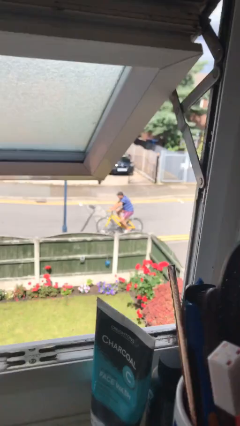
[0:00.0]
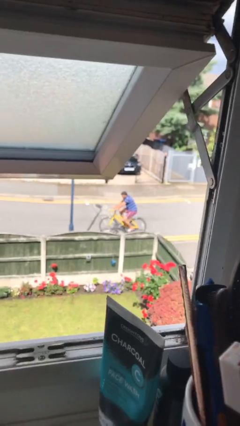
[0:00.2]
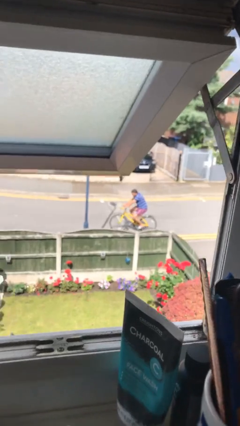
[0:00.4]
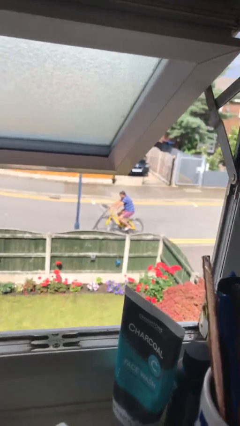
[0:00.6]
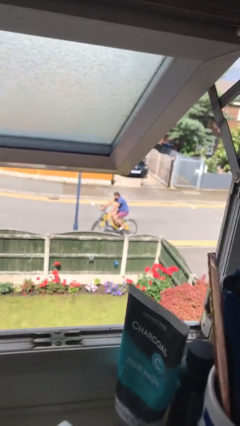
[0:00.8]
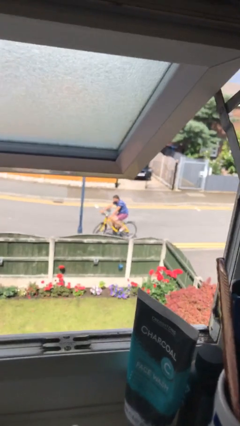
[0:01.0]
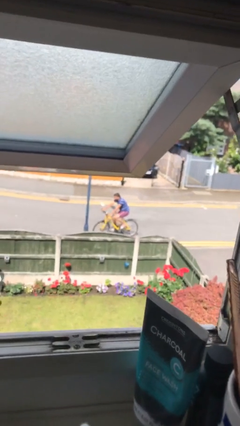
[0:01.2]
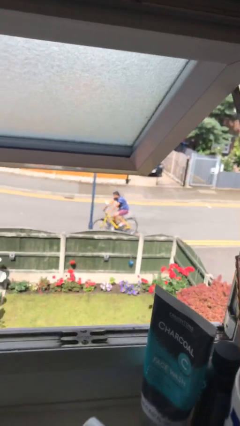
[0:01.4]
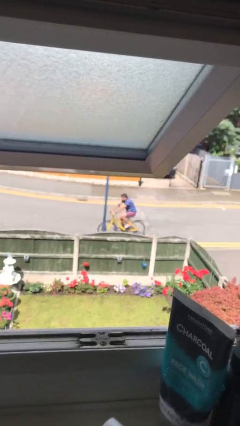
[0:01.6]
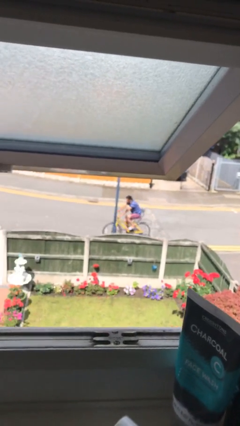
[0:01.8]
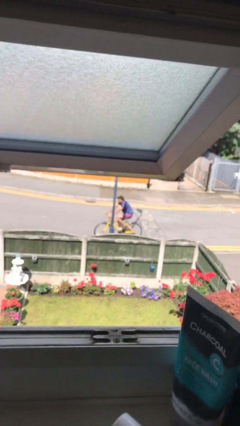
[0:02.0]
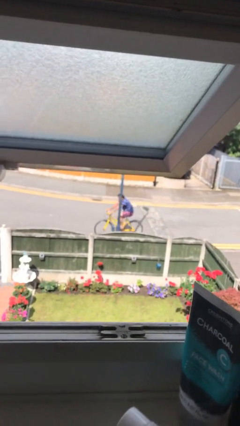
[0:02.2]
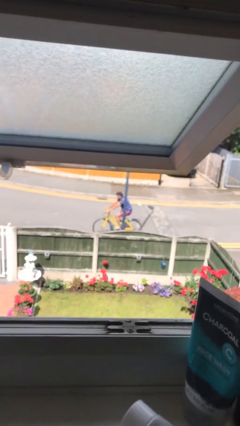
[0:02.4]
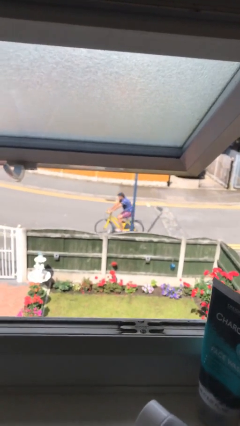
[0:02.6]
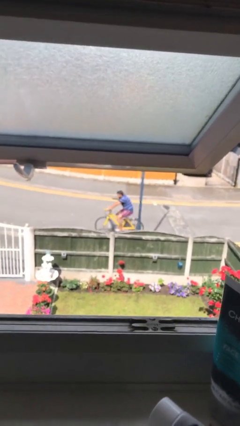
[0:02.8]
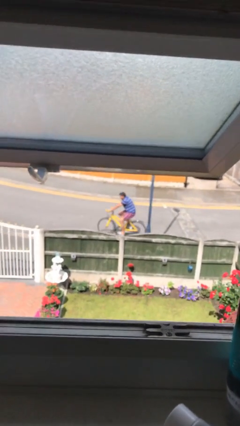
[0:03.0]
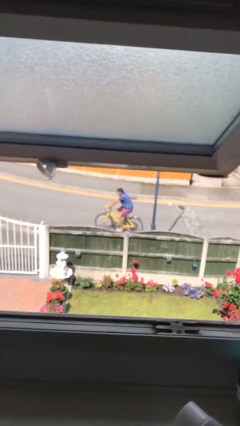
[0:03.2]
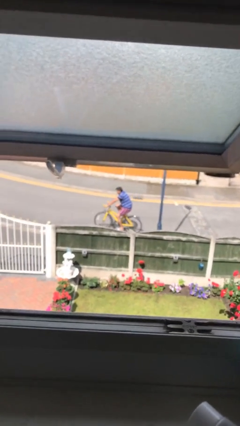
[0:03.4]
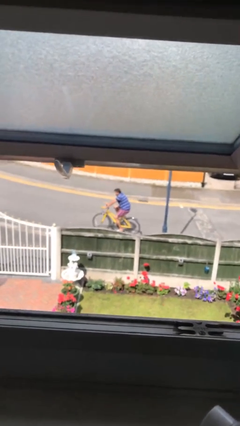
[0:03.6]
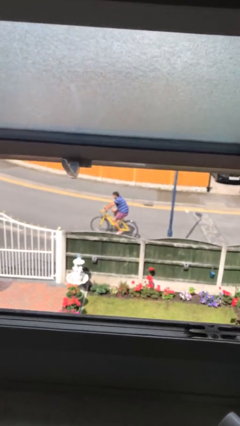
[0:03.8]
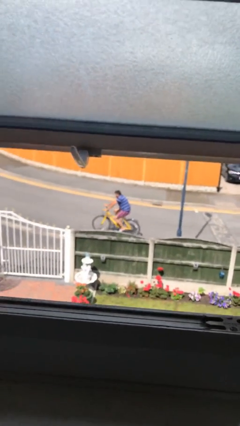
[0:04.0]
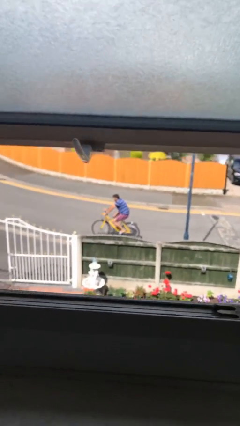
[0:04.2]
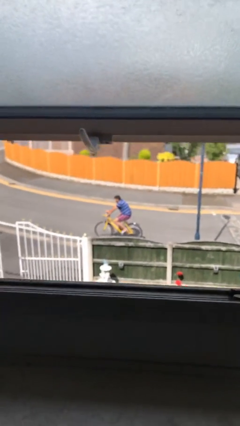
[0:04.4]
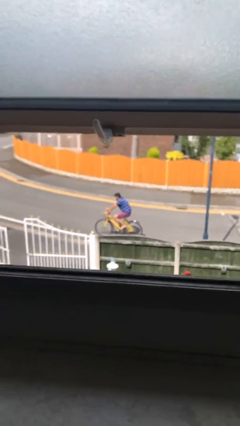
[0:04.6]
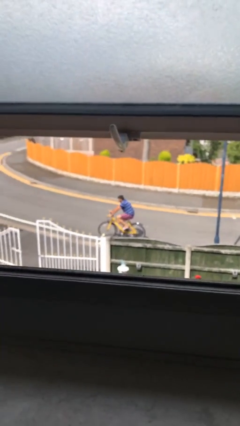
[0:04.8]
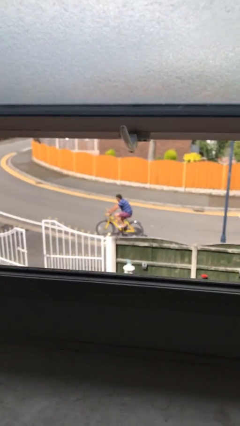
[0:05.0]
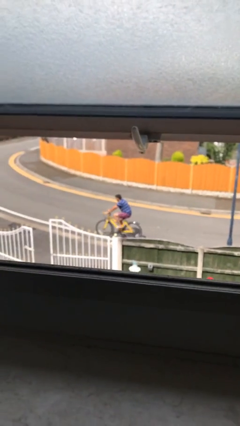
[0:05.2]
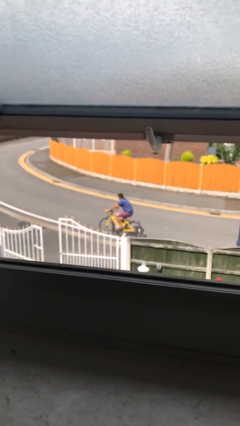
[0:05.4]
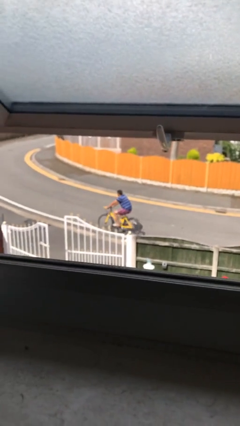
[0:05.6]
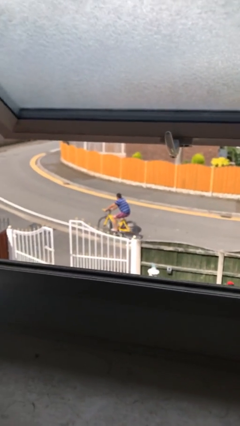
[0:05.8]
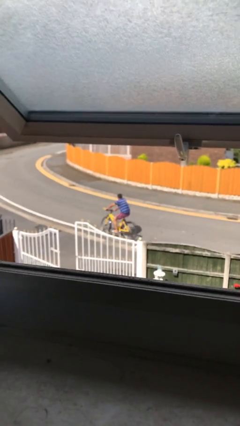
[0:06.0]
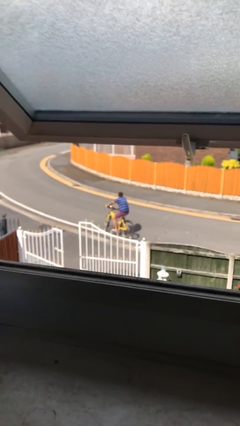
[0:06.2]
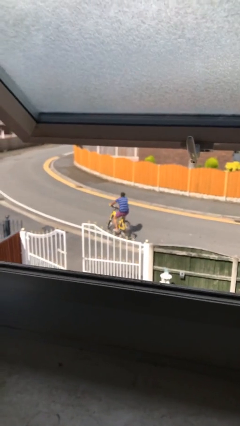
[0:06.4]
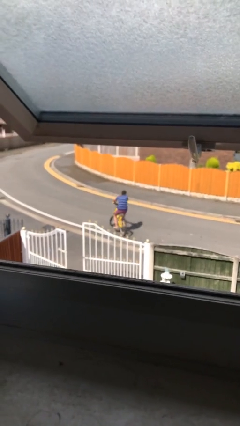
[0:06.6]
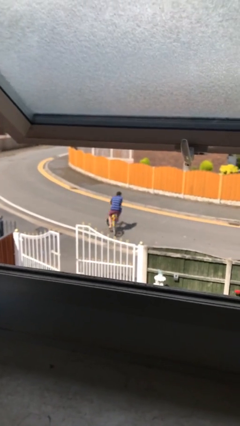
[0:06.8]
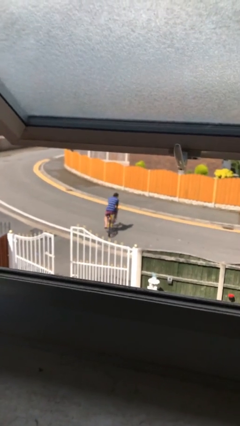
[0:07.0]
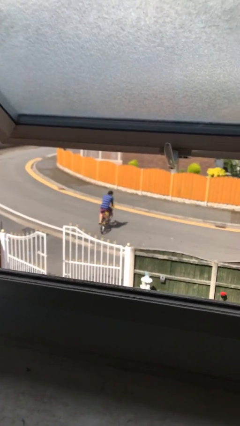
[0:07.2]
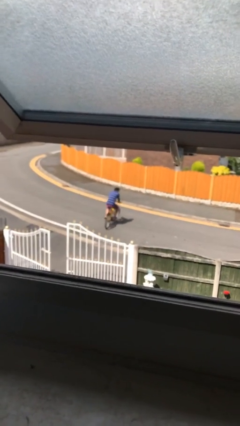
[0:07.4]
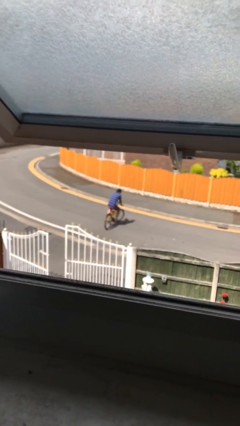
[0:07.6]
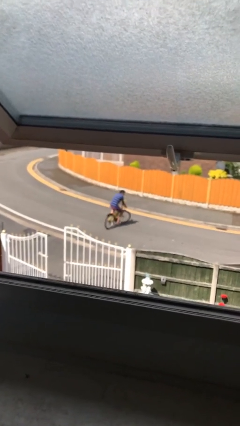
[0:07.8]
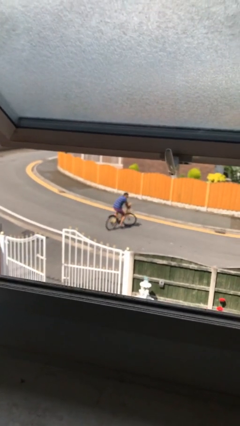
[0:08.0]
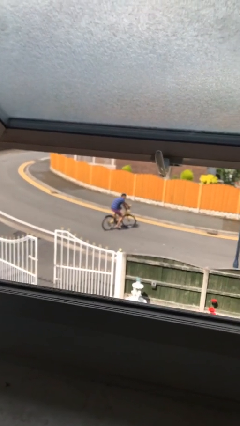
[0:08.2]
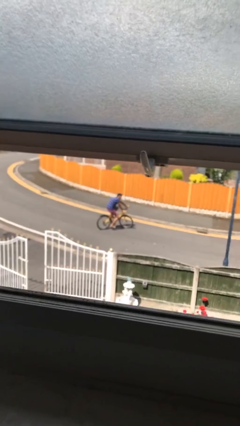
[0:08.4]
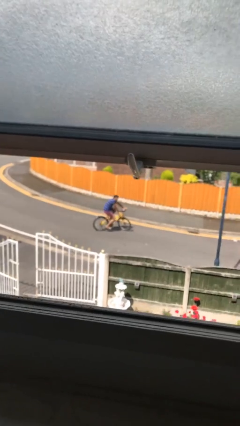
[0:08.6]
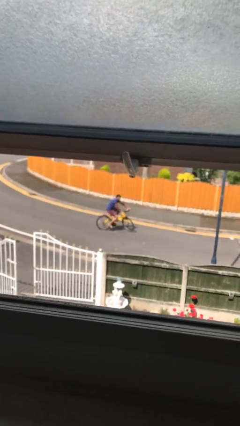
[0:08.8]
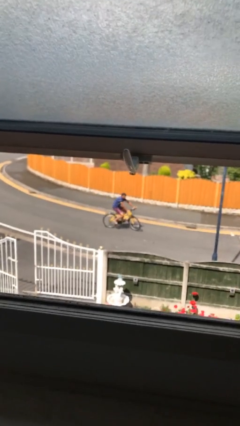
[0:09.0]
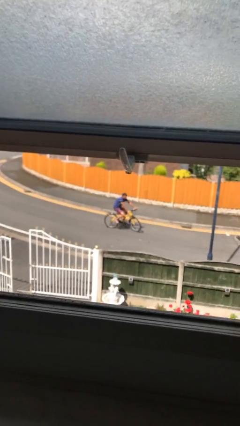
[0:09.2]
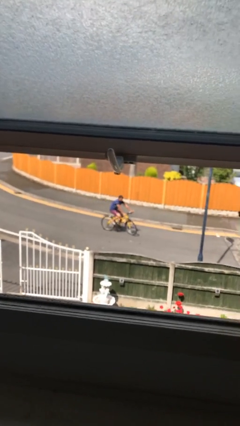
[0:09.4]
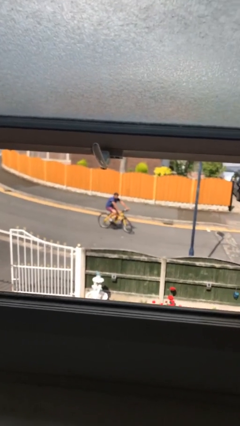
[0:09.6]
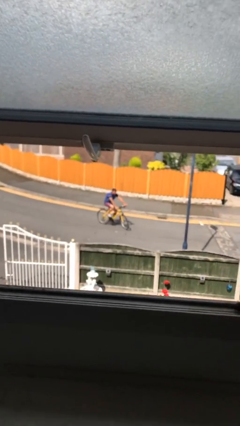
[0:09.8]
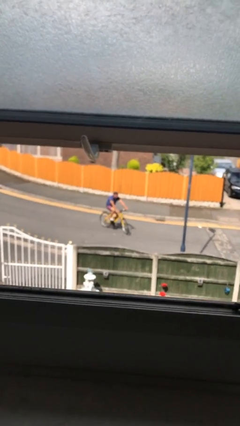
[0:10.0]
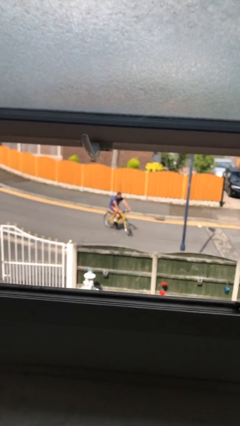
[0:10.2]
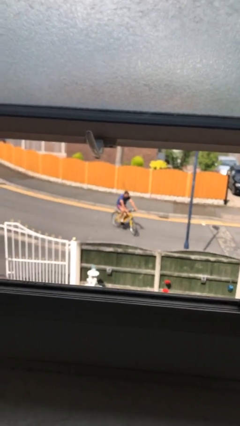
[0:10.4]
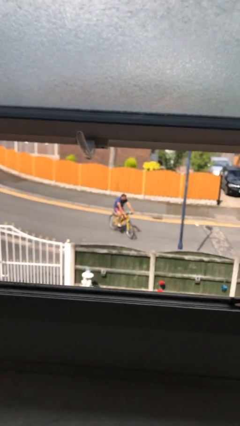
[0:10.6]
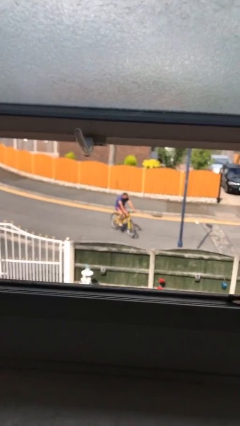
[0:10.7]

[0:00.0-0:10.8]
person rides bicycle

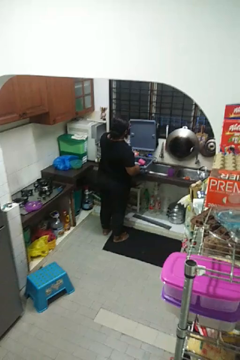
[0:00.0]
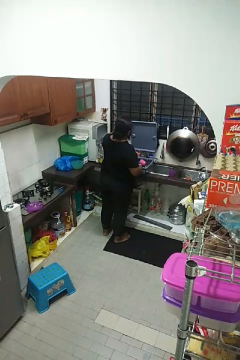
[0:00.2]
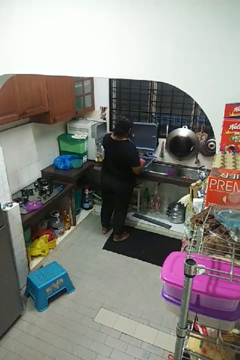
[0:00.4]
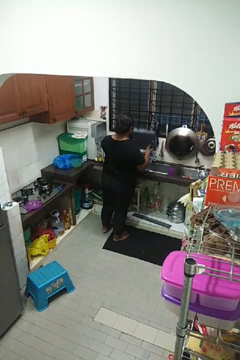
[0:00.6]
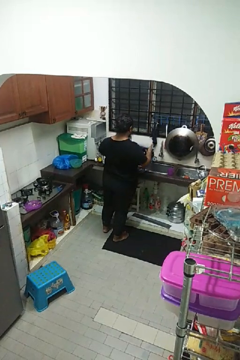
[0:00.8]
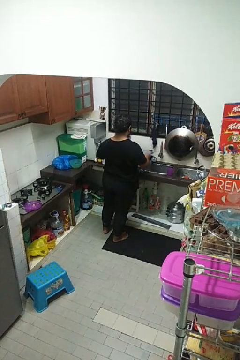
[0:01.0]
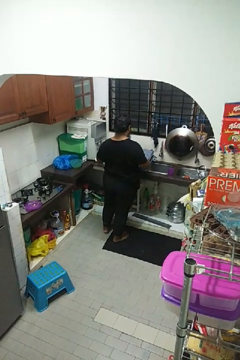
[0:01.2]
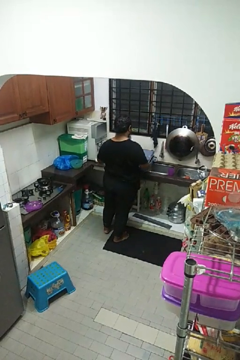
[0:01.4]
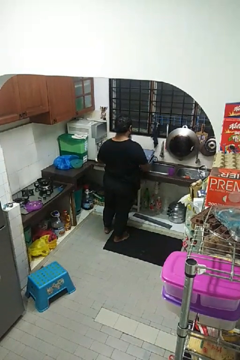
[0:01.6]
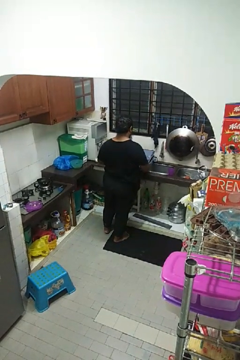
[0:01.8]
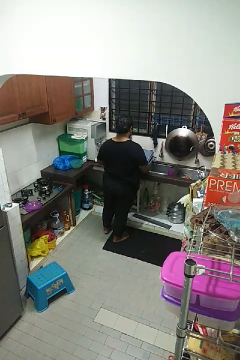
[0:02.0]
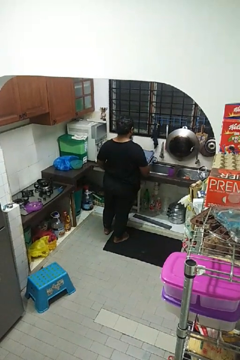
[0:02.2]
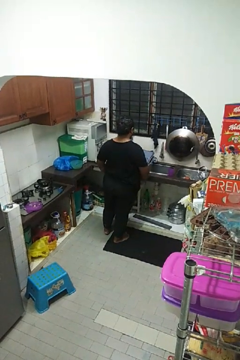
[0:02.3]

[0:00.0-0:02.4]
person closes dishwasher

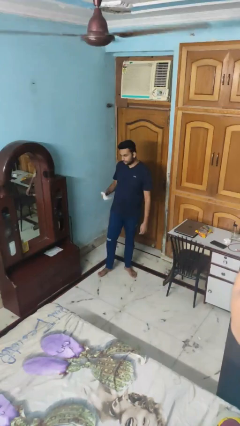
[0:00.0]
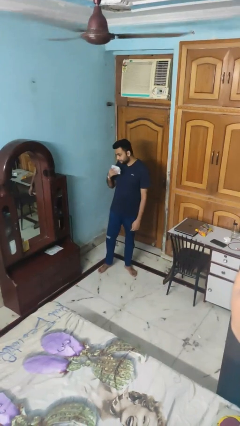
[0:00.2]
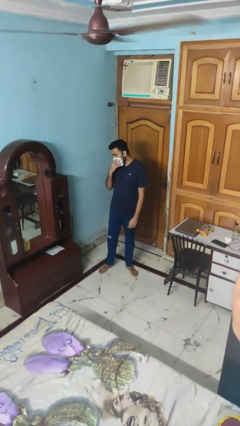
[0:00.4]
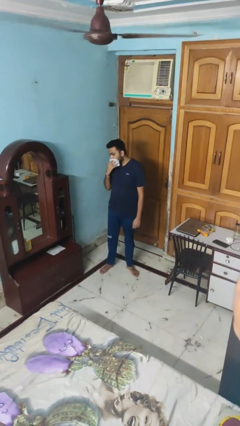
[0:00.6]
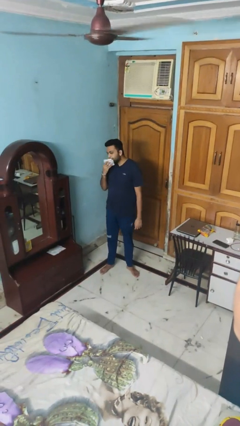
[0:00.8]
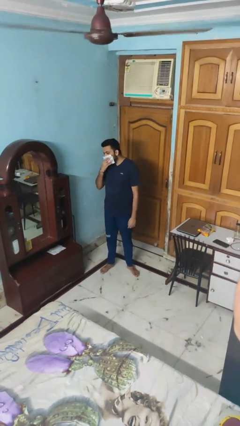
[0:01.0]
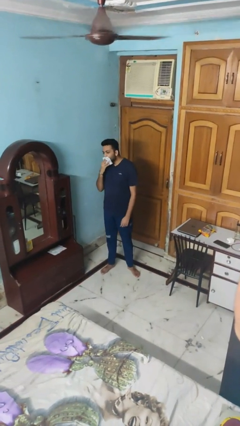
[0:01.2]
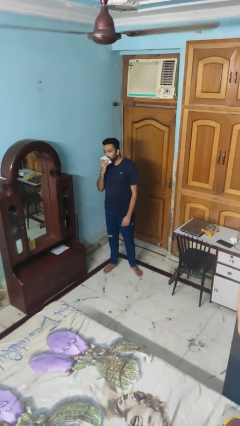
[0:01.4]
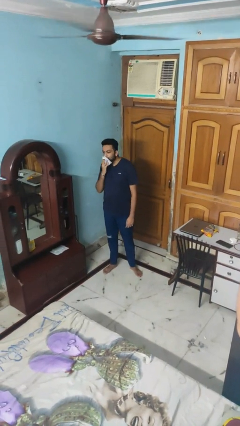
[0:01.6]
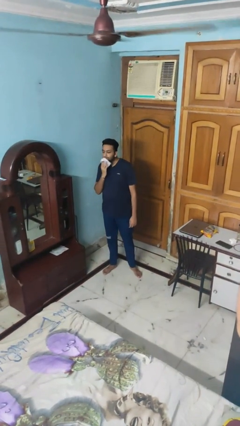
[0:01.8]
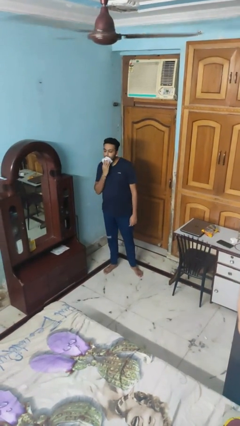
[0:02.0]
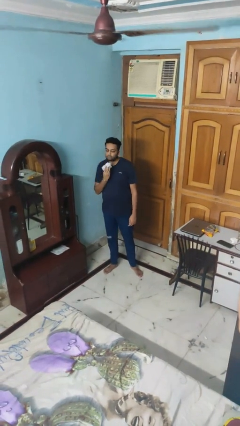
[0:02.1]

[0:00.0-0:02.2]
person wipes mouth with napkin

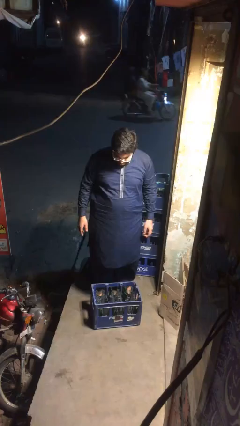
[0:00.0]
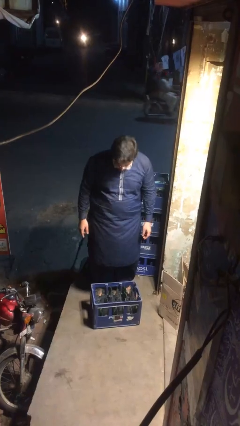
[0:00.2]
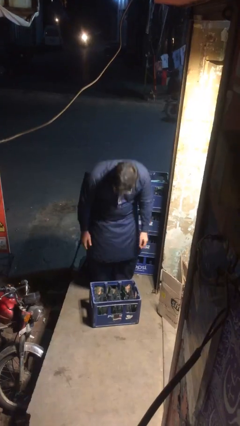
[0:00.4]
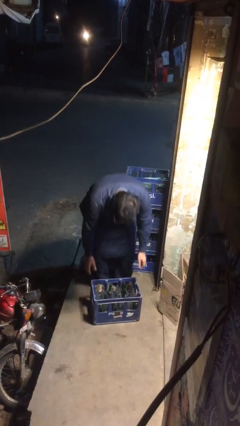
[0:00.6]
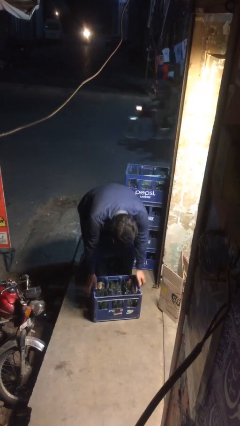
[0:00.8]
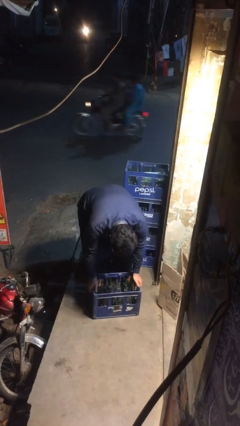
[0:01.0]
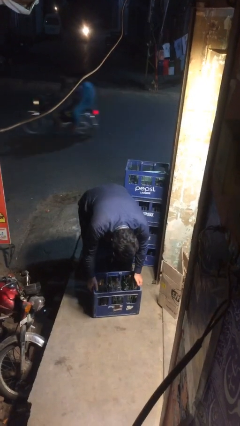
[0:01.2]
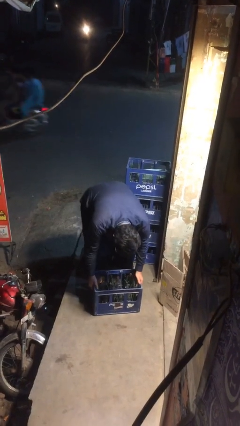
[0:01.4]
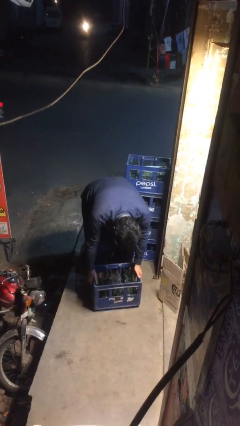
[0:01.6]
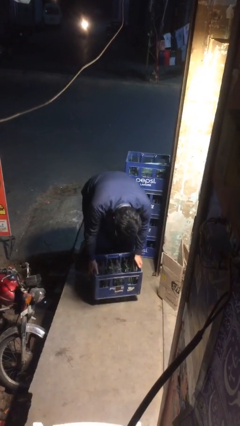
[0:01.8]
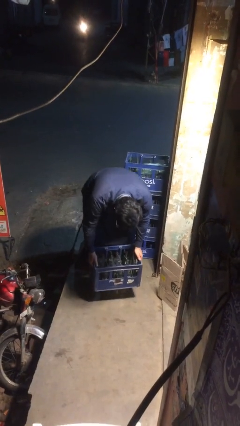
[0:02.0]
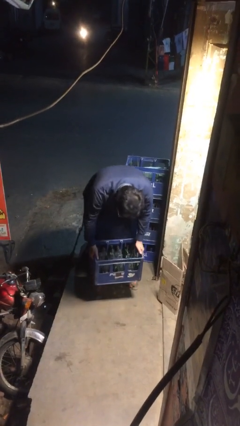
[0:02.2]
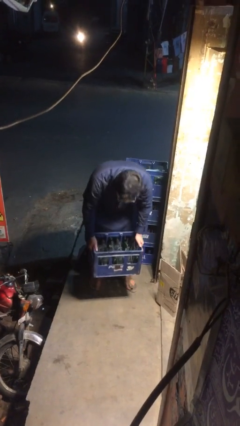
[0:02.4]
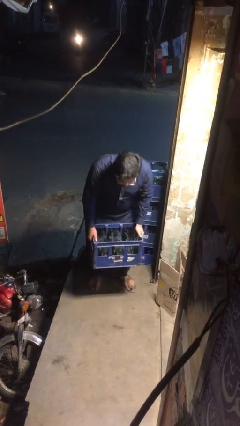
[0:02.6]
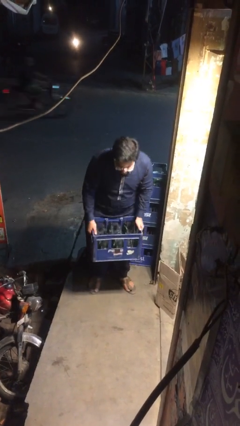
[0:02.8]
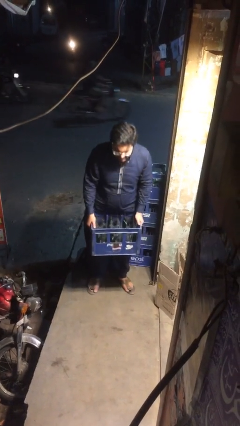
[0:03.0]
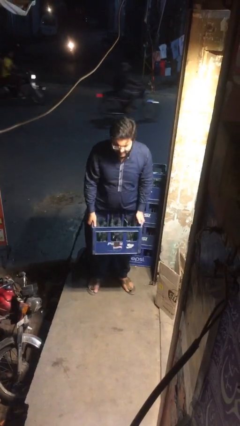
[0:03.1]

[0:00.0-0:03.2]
person picks up object from floor
